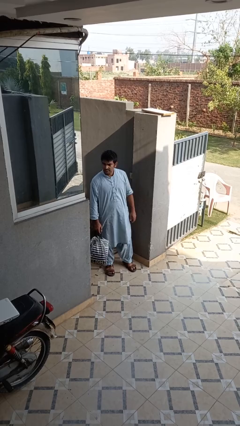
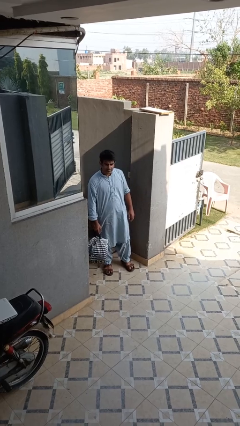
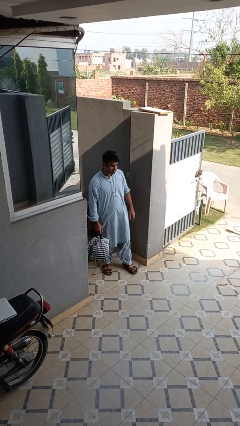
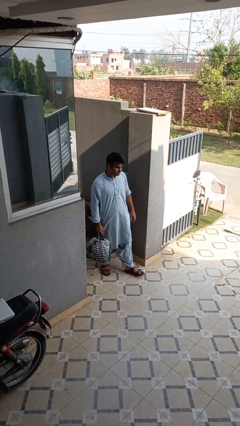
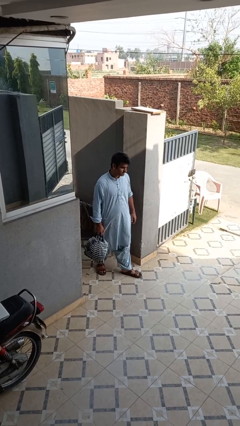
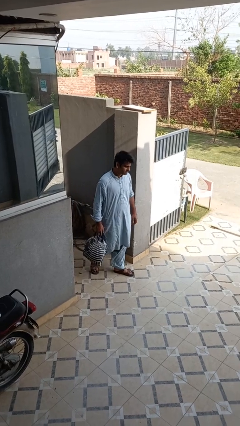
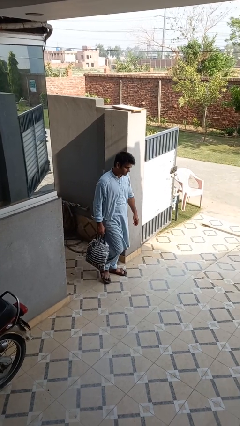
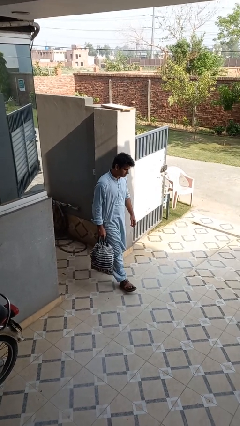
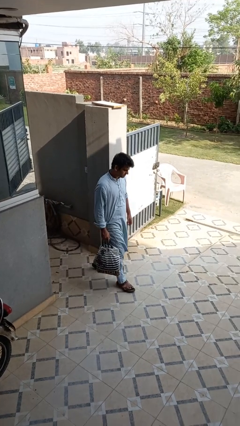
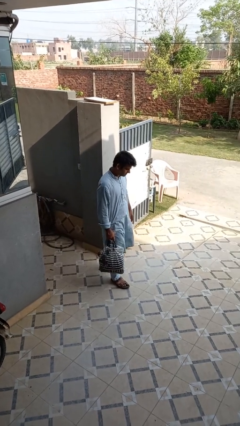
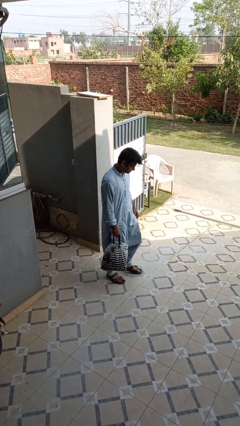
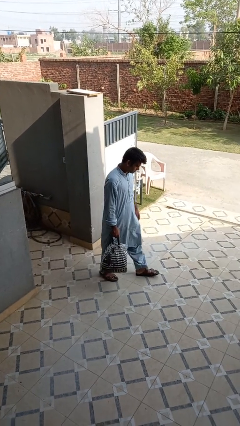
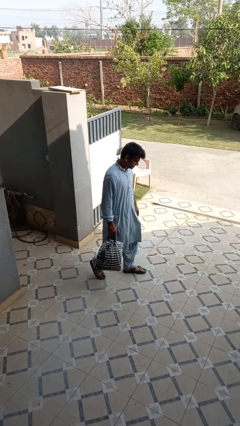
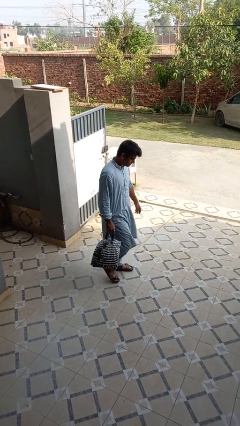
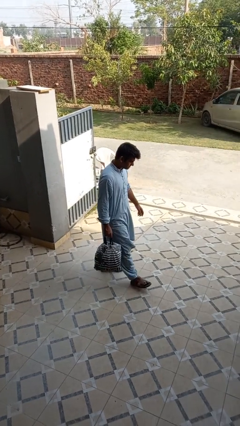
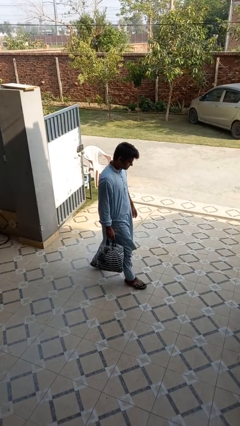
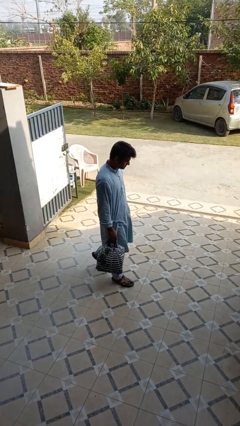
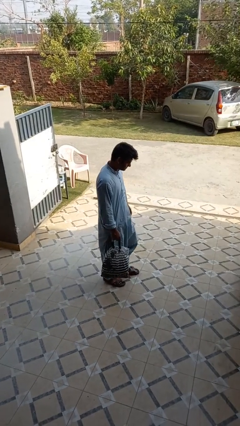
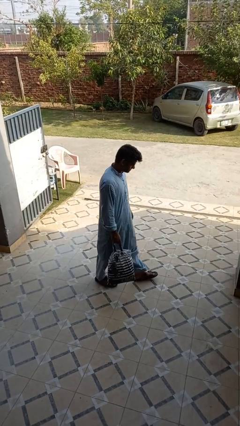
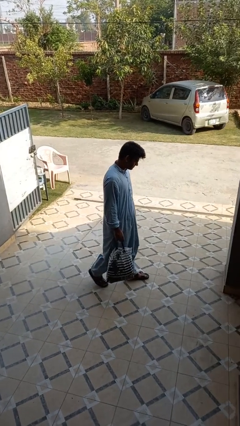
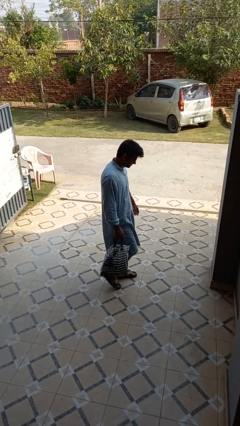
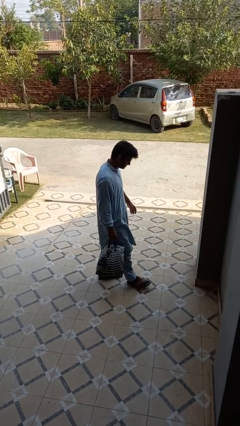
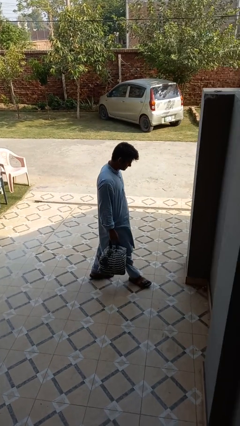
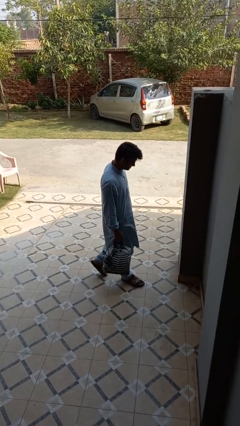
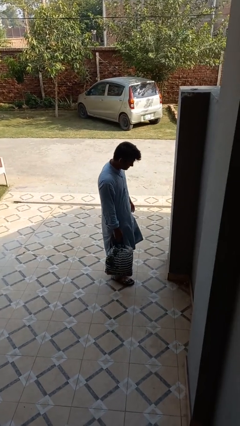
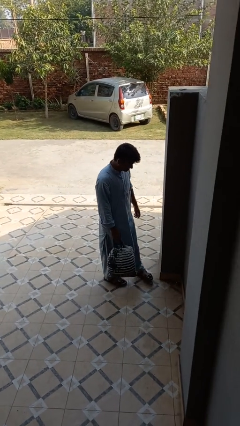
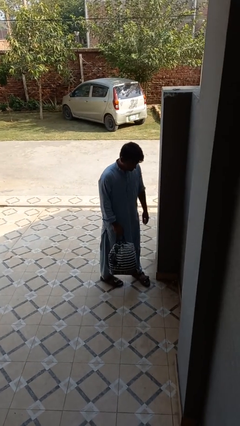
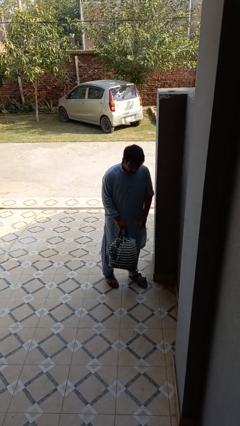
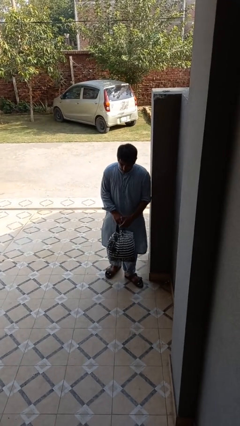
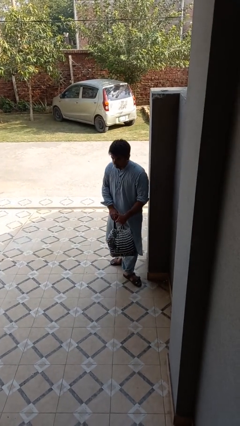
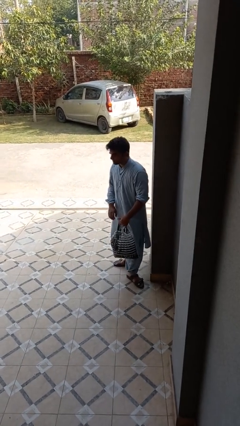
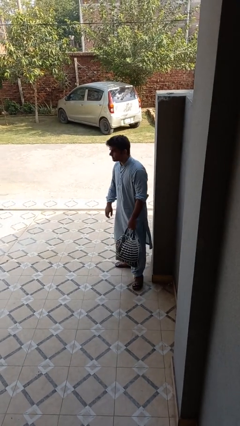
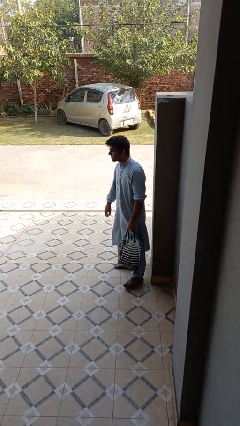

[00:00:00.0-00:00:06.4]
person carries groceries

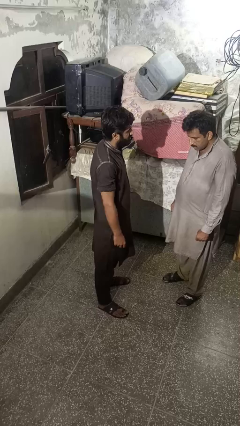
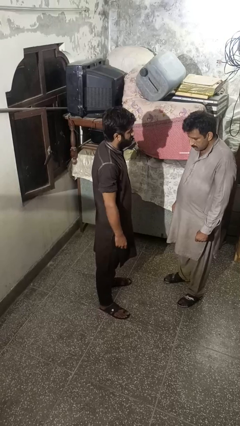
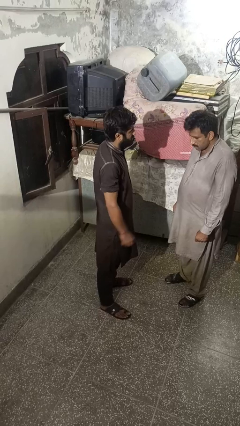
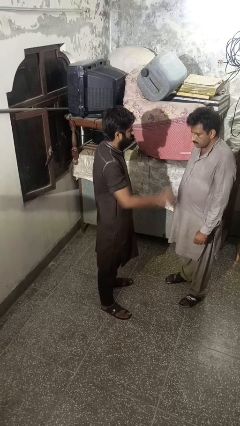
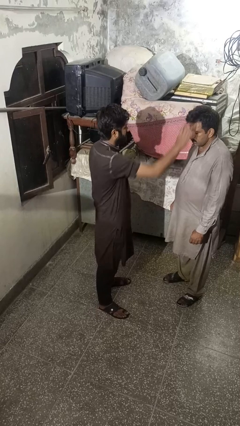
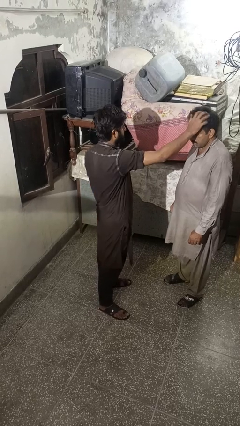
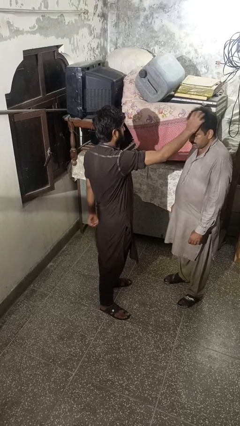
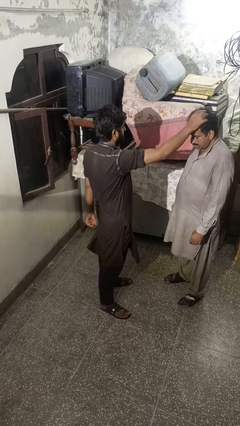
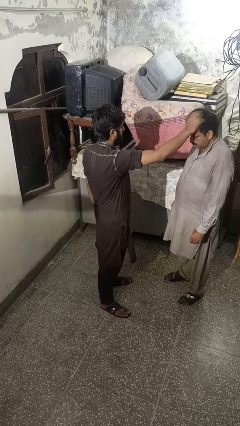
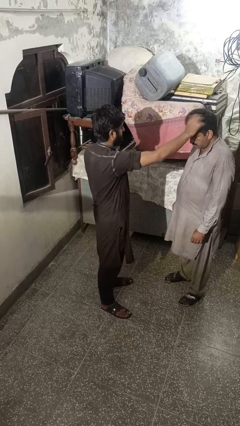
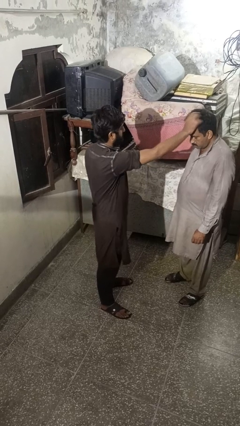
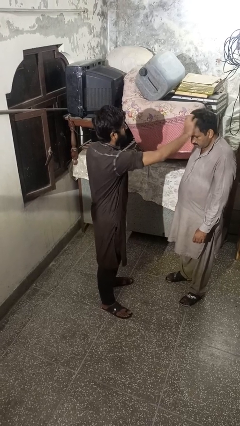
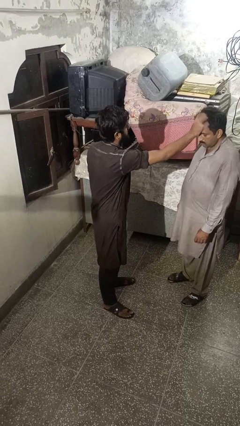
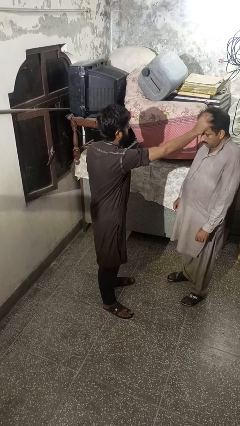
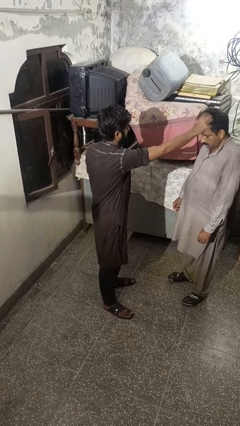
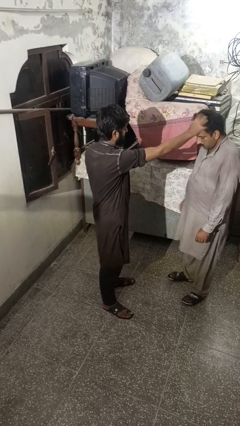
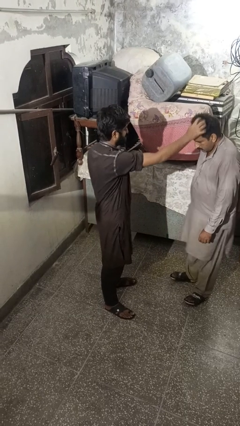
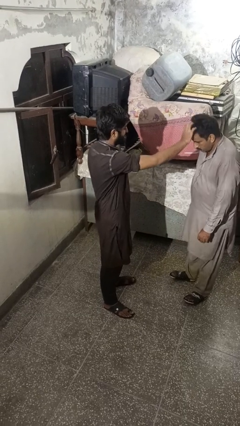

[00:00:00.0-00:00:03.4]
person grabs person by hair

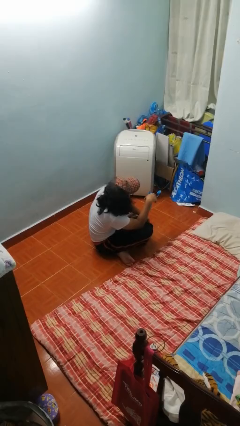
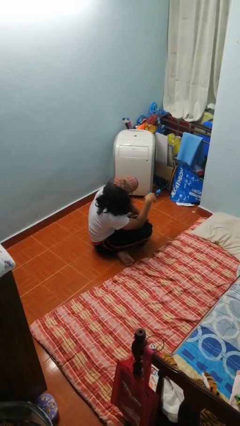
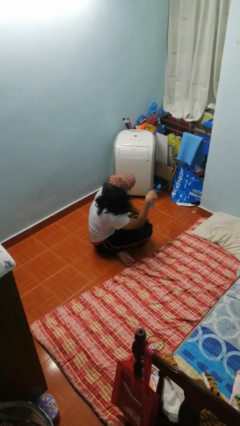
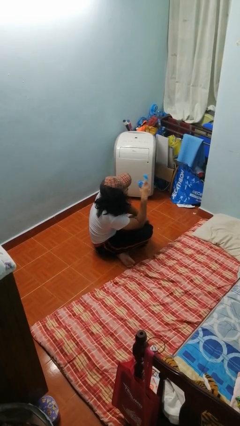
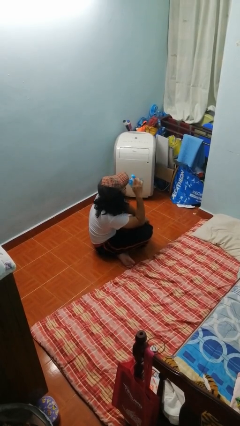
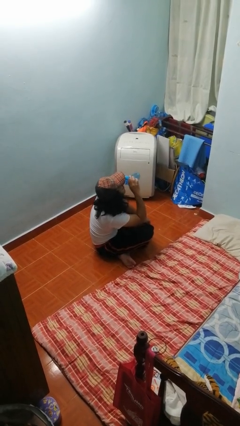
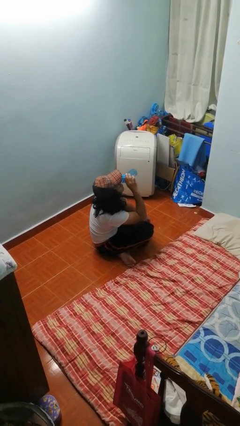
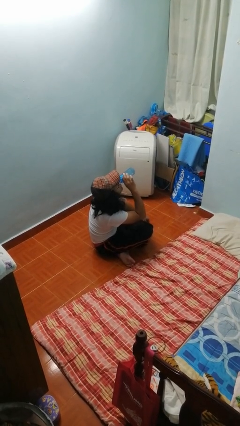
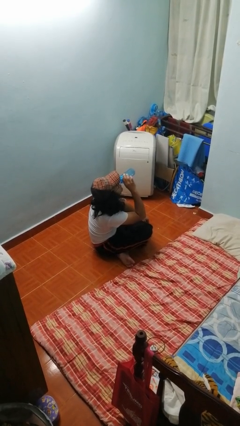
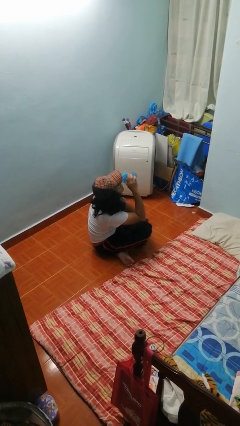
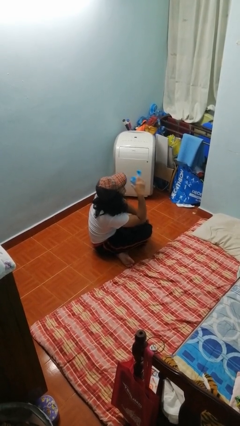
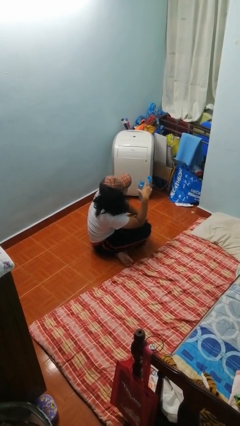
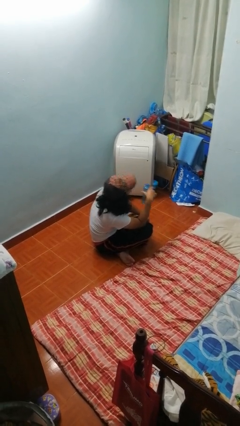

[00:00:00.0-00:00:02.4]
person drinks from bottle

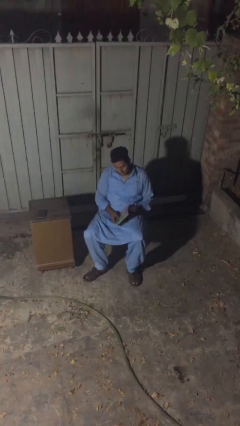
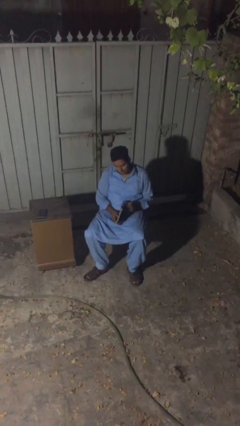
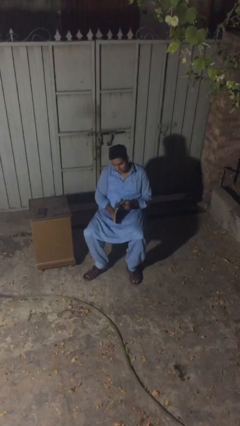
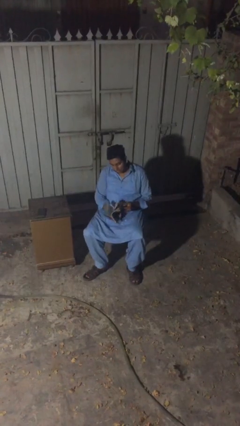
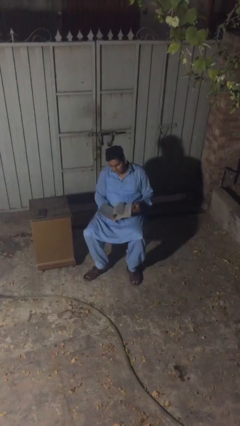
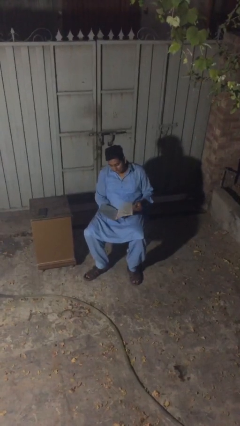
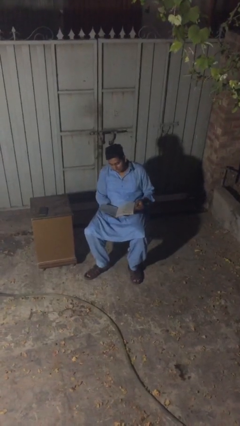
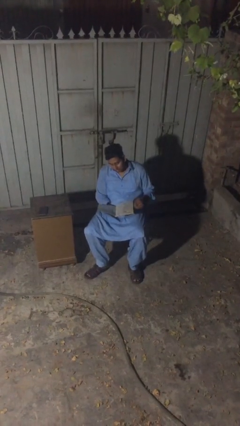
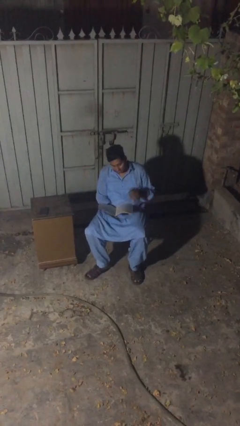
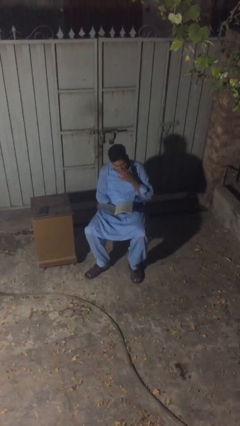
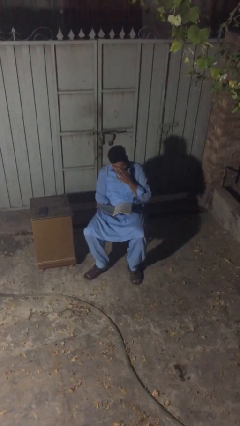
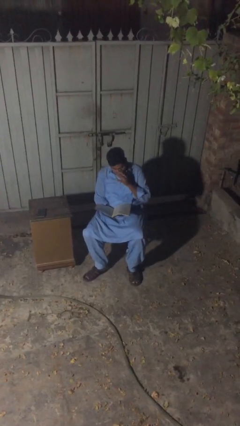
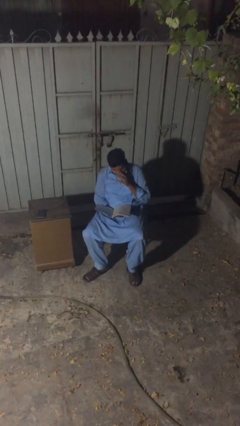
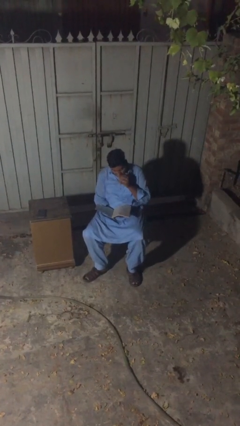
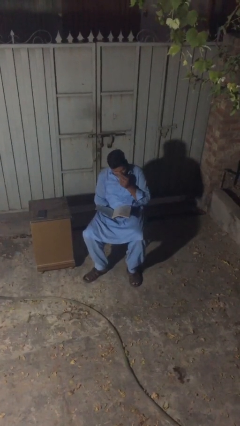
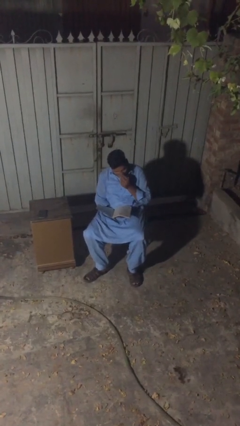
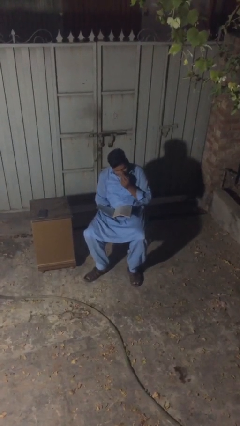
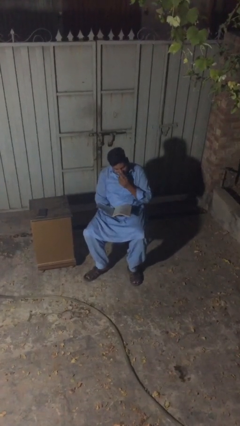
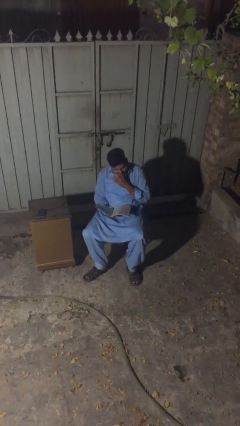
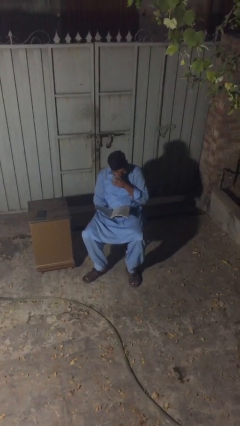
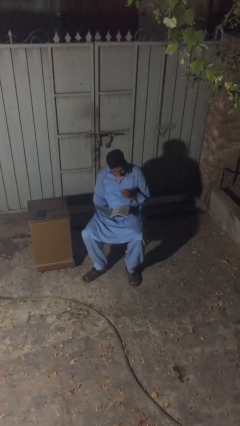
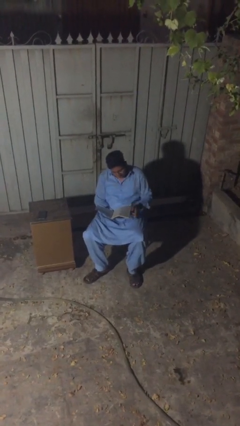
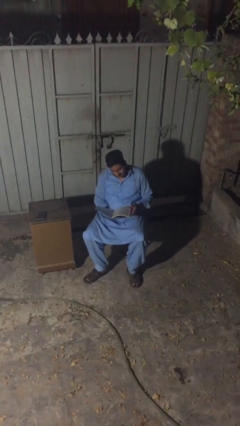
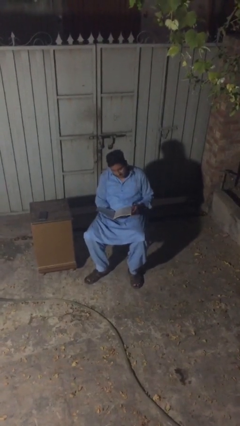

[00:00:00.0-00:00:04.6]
person reads document

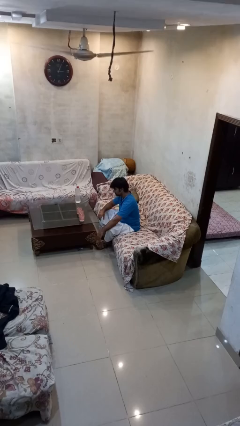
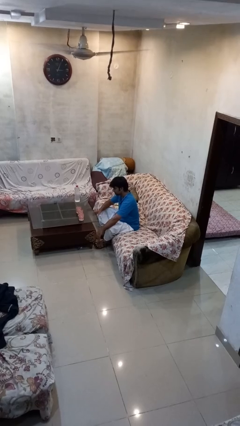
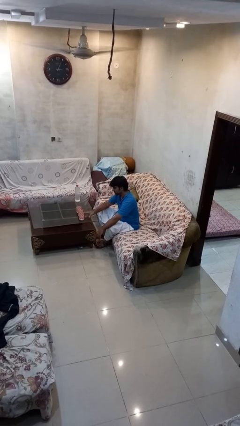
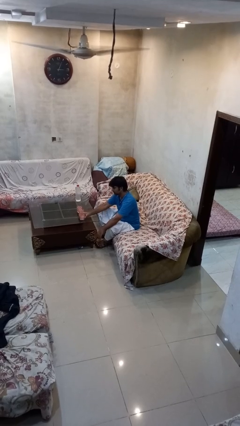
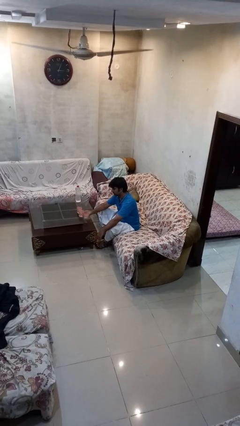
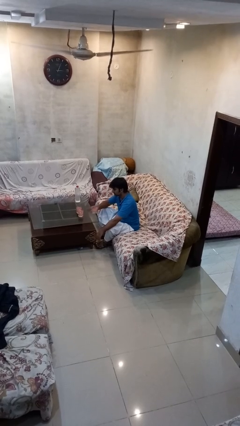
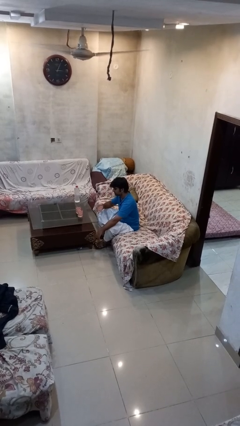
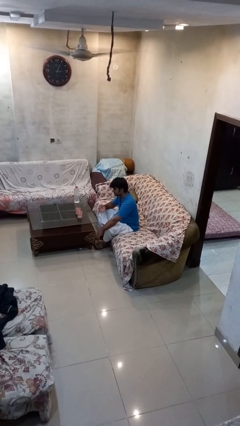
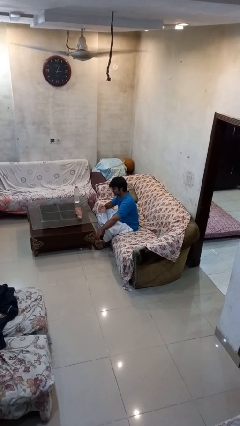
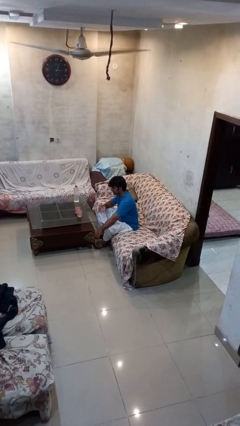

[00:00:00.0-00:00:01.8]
person picks up object from table
